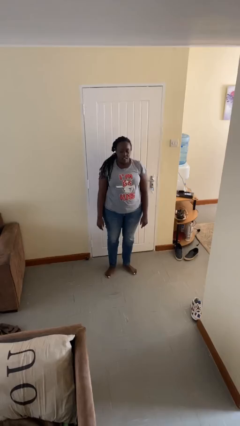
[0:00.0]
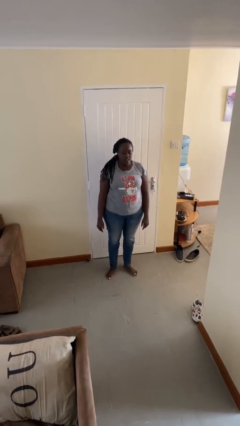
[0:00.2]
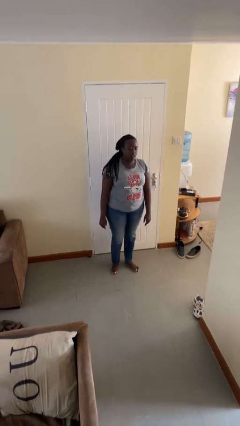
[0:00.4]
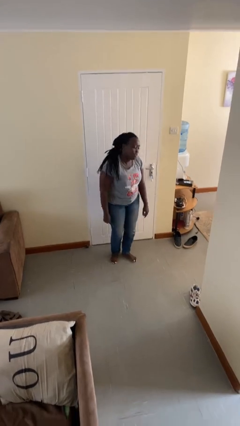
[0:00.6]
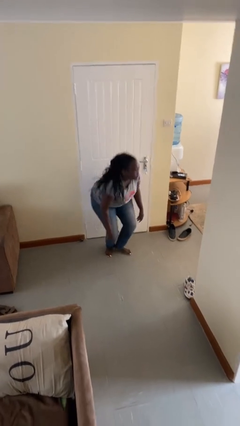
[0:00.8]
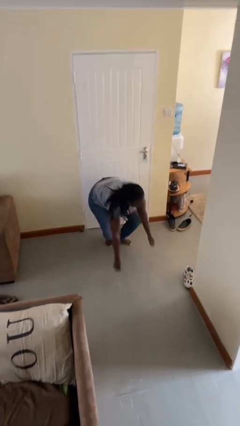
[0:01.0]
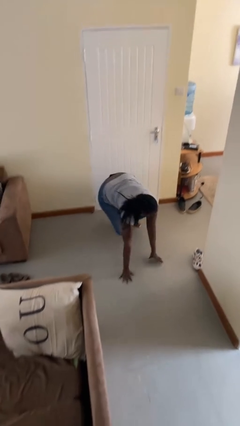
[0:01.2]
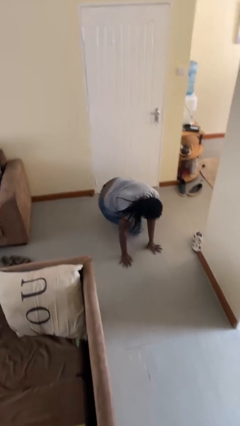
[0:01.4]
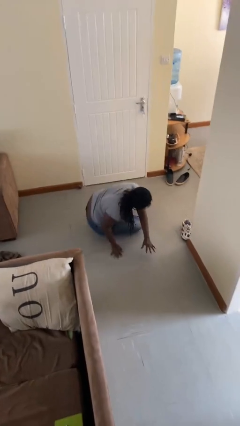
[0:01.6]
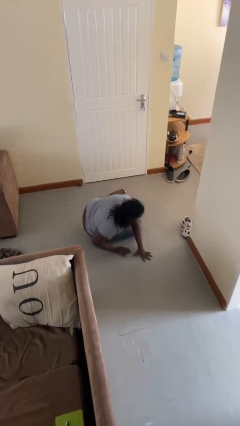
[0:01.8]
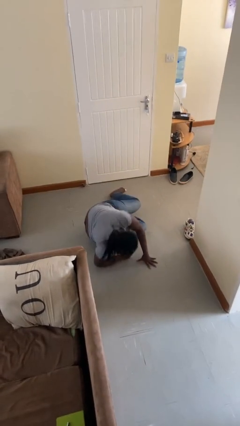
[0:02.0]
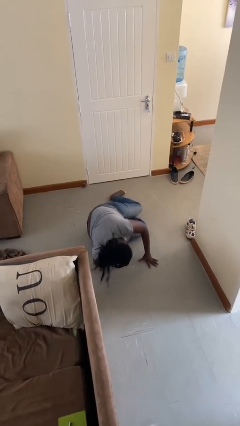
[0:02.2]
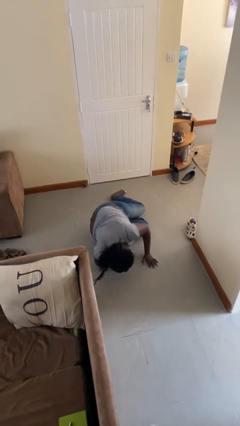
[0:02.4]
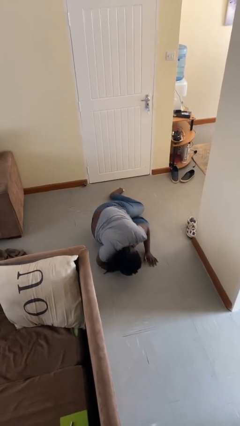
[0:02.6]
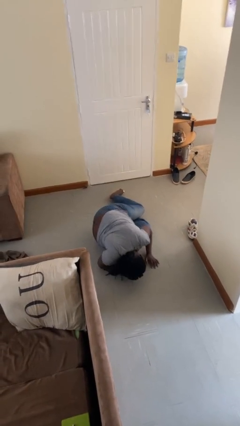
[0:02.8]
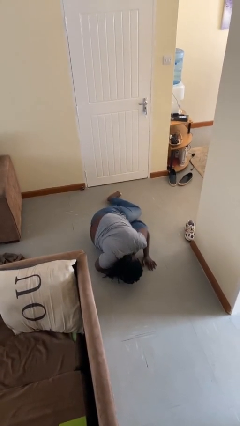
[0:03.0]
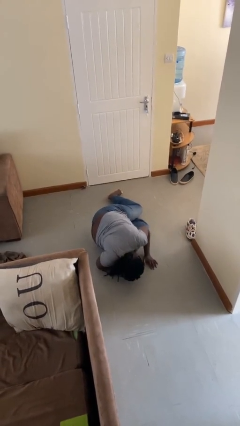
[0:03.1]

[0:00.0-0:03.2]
person falls while standing

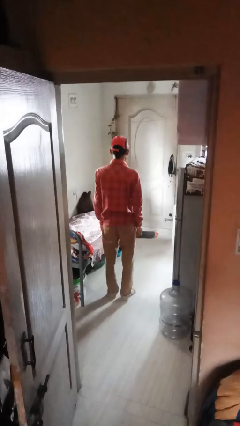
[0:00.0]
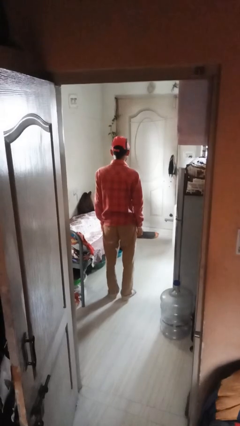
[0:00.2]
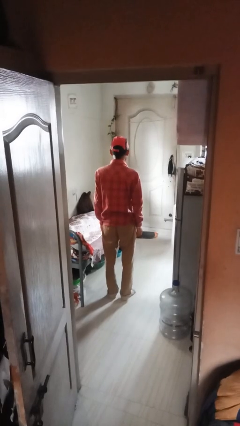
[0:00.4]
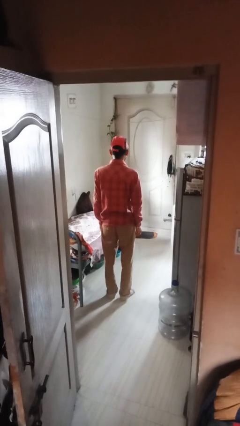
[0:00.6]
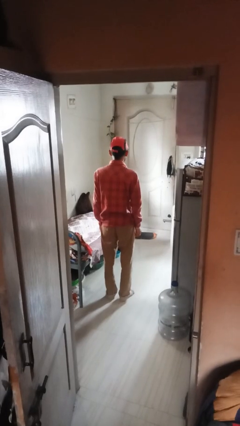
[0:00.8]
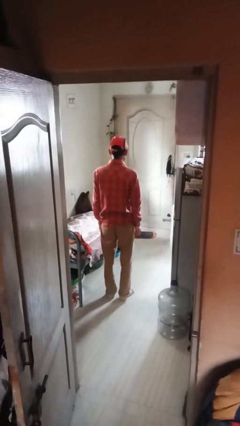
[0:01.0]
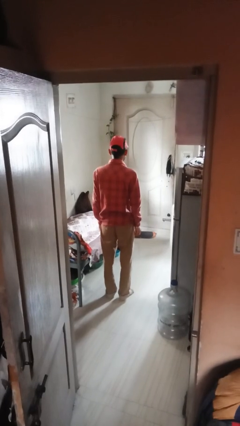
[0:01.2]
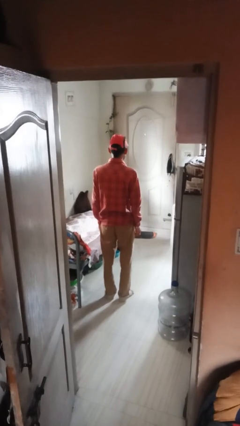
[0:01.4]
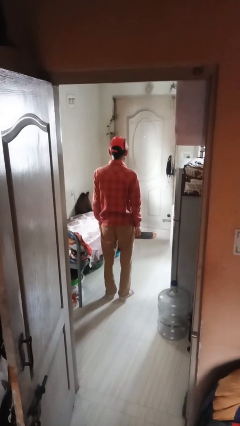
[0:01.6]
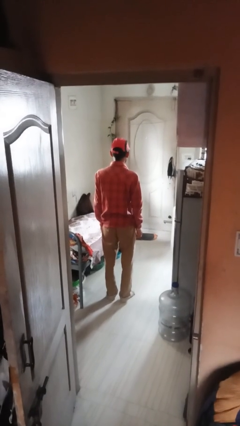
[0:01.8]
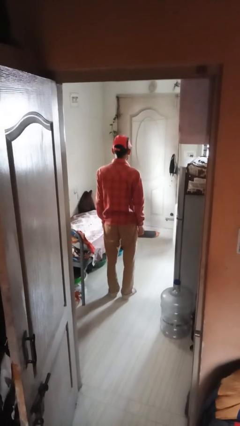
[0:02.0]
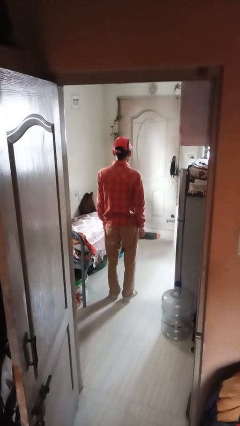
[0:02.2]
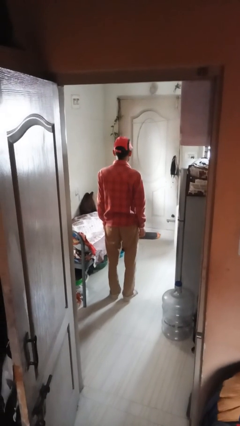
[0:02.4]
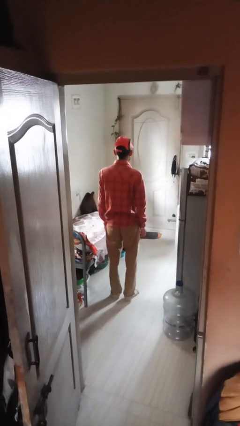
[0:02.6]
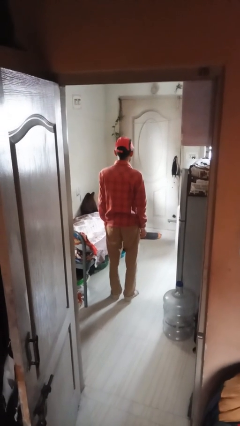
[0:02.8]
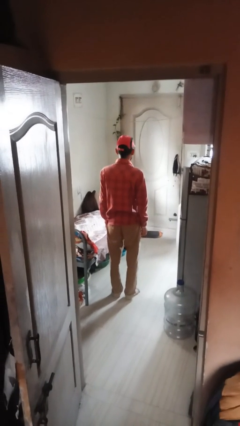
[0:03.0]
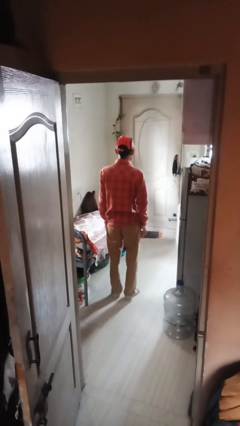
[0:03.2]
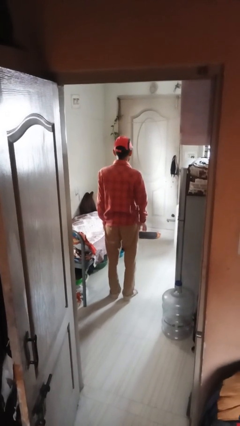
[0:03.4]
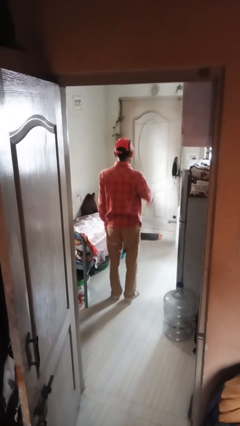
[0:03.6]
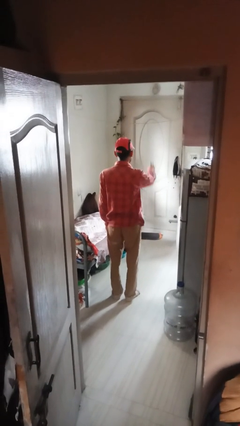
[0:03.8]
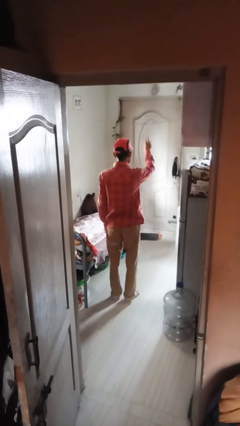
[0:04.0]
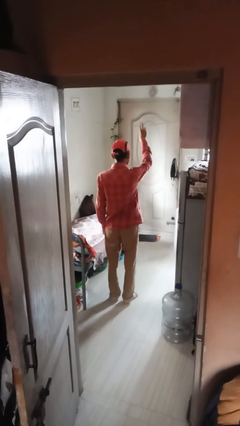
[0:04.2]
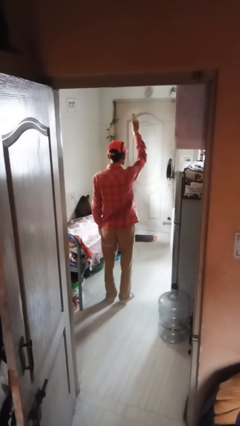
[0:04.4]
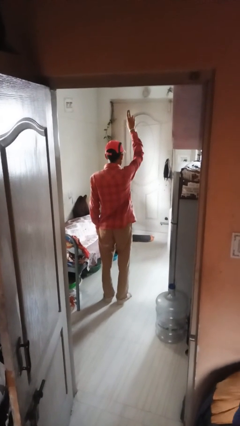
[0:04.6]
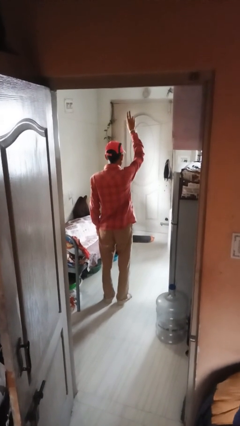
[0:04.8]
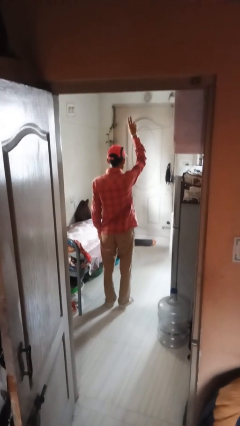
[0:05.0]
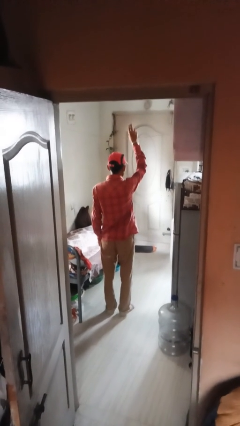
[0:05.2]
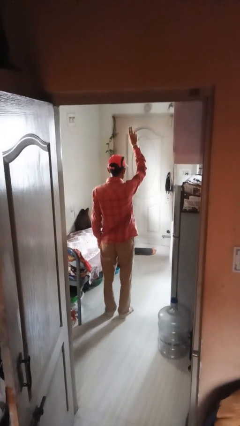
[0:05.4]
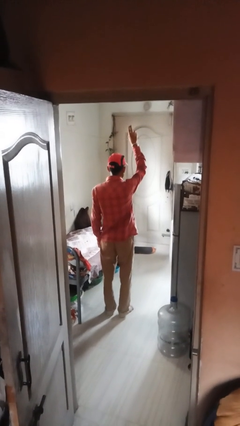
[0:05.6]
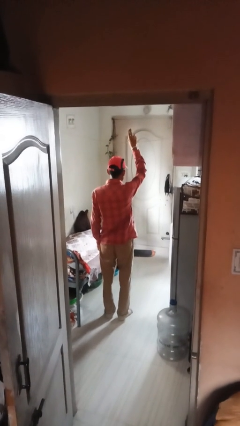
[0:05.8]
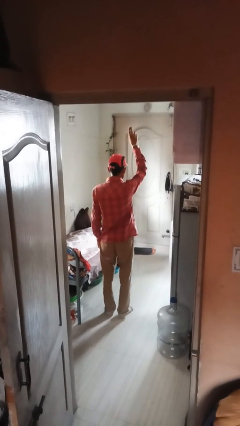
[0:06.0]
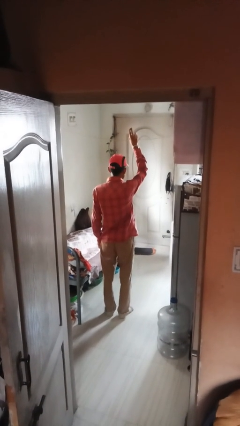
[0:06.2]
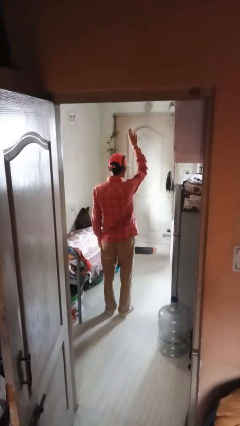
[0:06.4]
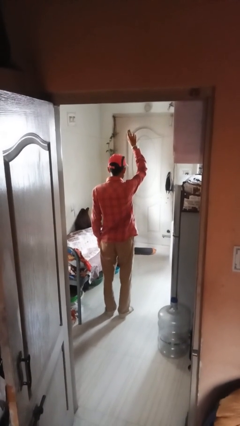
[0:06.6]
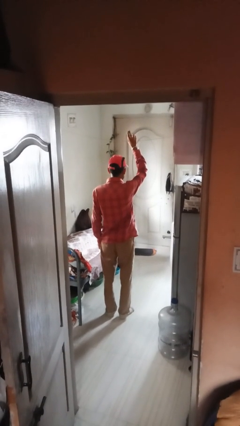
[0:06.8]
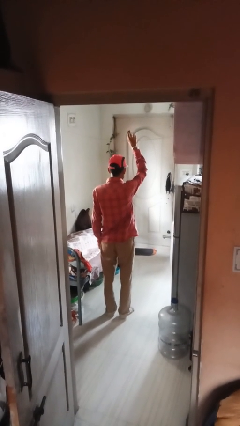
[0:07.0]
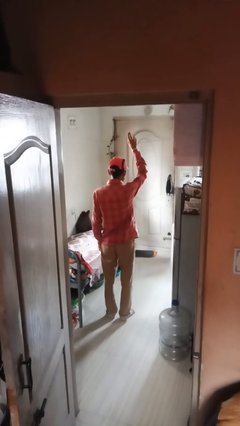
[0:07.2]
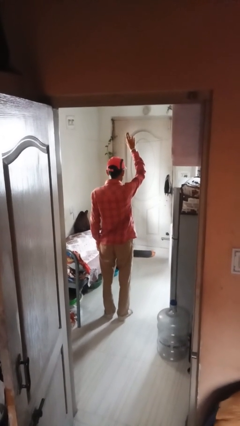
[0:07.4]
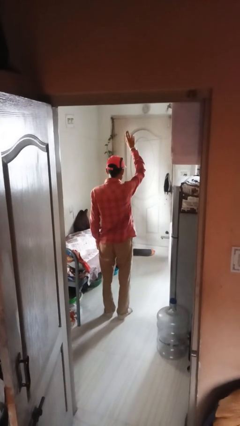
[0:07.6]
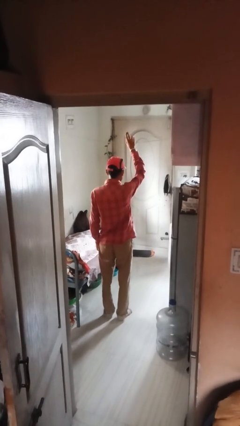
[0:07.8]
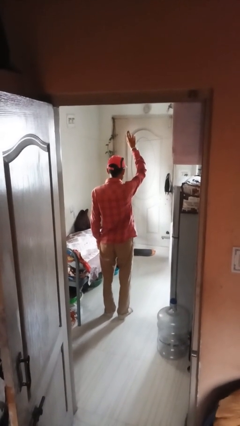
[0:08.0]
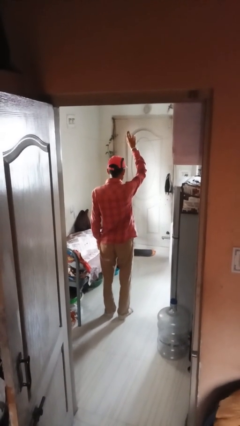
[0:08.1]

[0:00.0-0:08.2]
person gestures swipe up

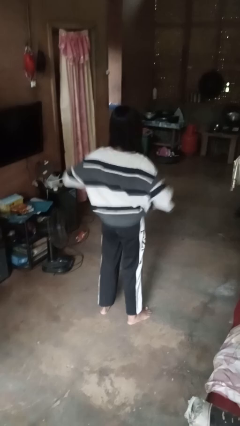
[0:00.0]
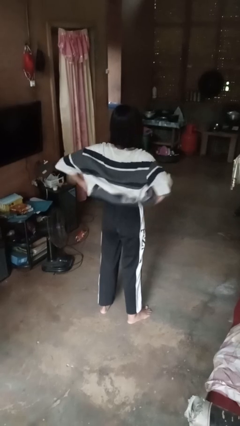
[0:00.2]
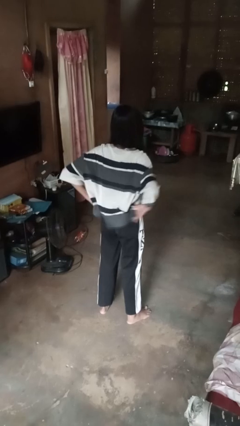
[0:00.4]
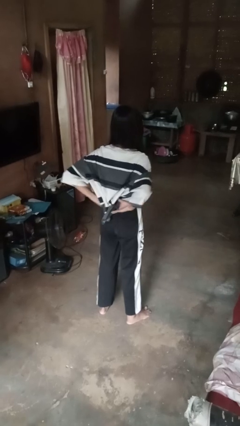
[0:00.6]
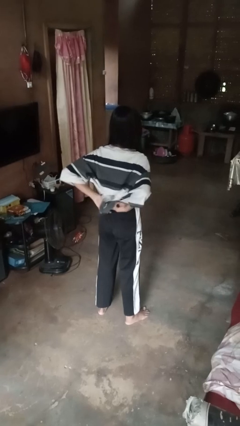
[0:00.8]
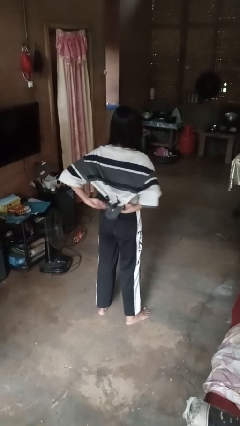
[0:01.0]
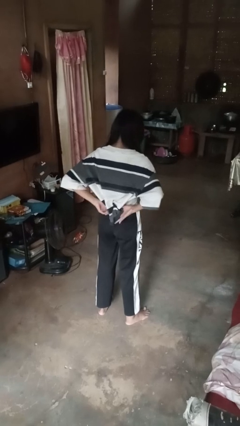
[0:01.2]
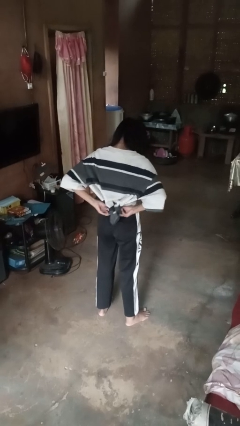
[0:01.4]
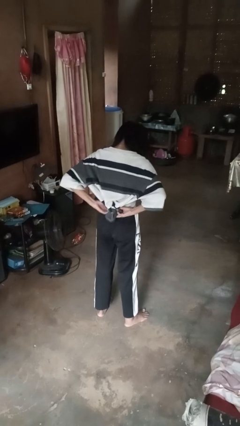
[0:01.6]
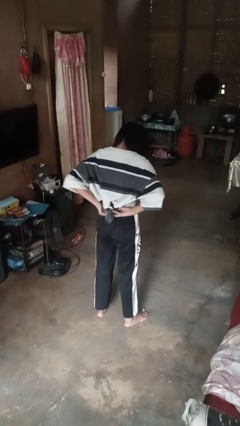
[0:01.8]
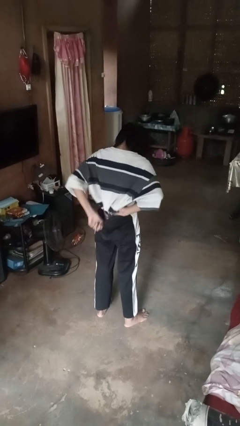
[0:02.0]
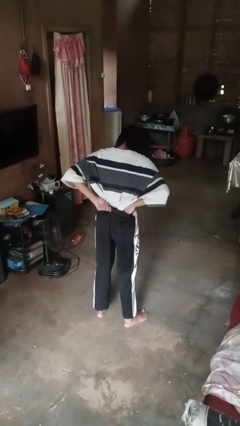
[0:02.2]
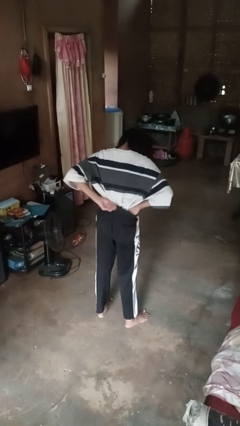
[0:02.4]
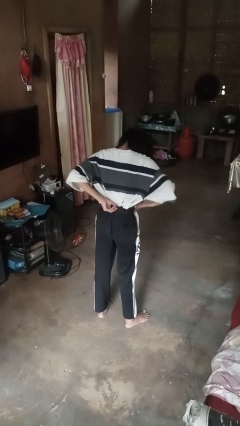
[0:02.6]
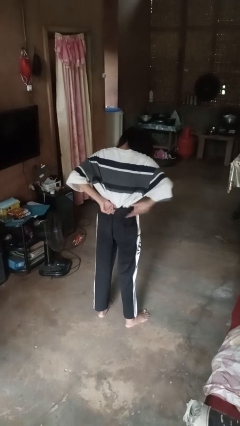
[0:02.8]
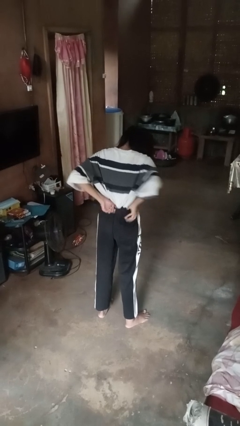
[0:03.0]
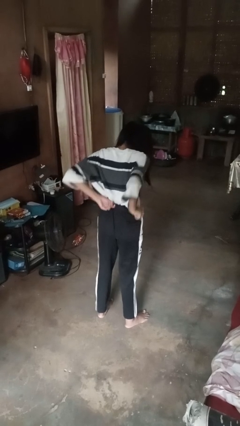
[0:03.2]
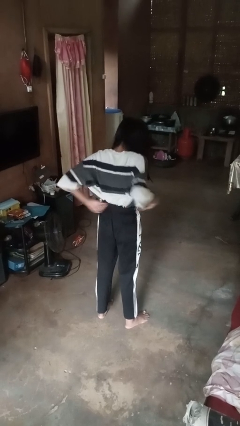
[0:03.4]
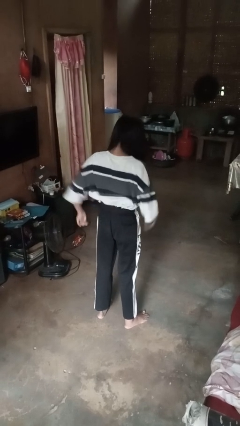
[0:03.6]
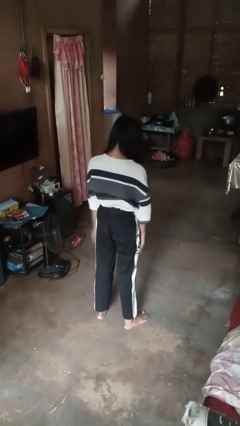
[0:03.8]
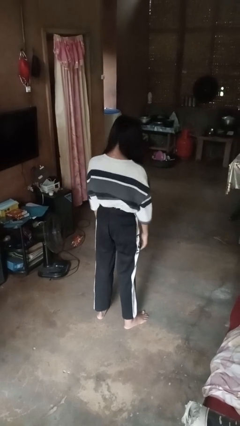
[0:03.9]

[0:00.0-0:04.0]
person tucks in shirt

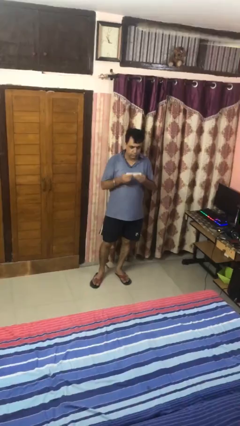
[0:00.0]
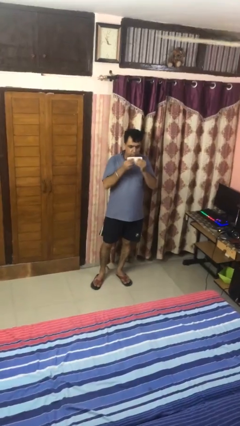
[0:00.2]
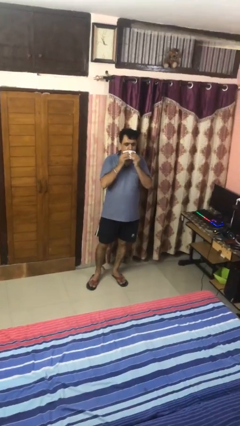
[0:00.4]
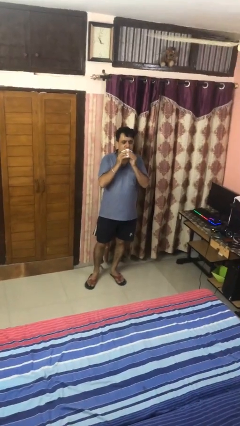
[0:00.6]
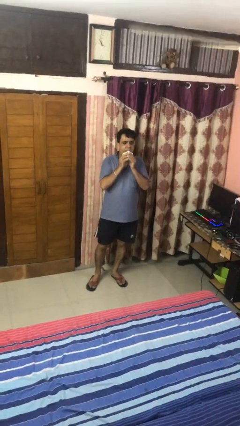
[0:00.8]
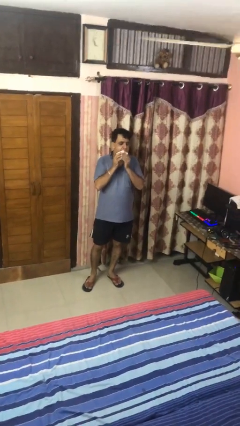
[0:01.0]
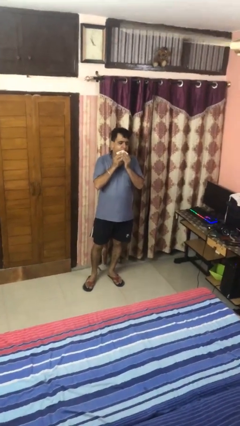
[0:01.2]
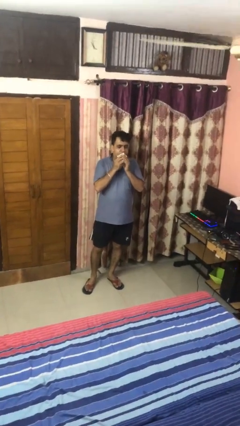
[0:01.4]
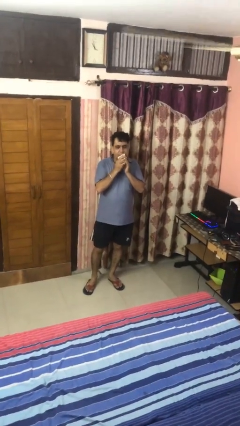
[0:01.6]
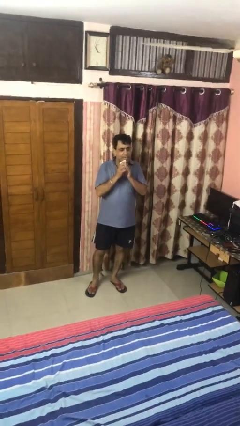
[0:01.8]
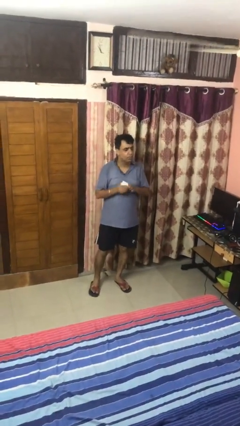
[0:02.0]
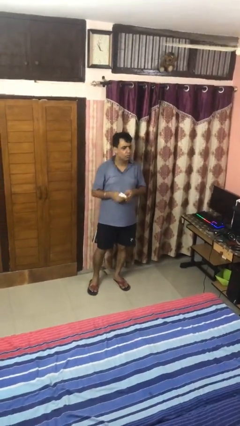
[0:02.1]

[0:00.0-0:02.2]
person wipes mouth with napkin

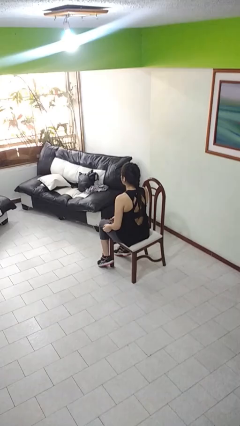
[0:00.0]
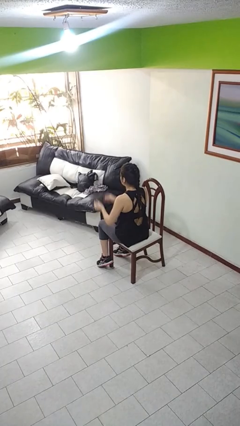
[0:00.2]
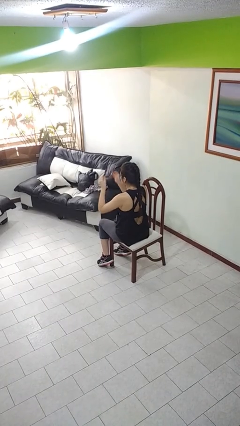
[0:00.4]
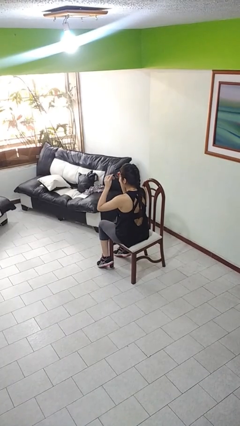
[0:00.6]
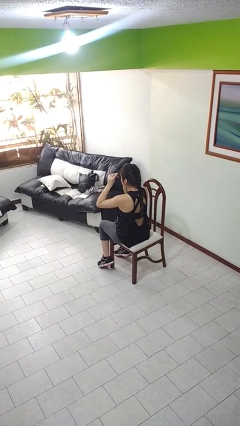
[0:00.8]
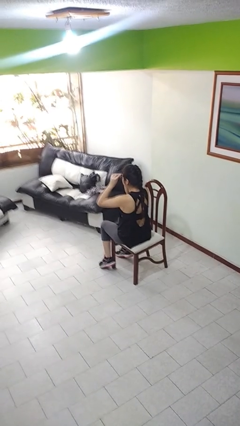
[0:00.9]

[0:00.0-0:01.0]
person puts on glasses
